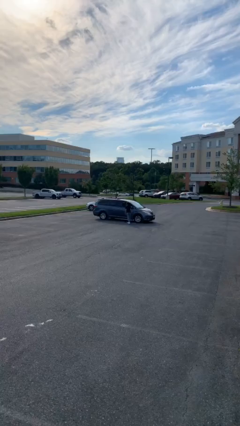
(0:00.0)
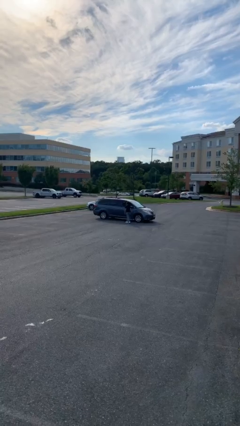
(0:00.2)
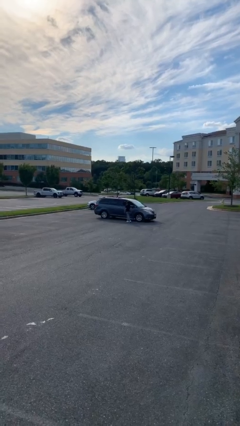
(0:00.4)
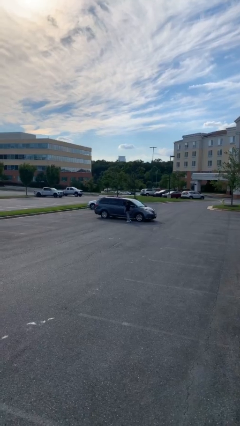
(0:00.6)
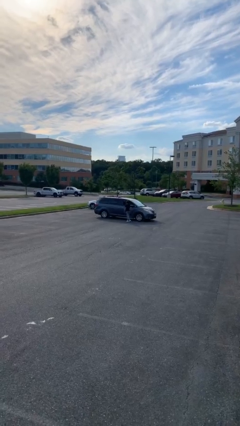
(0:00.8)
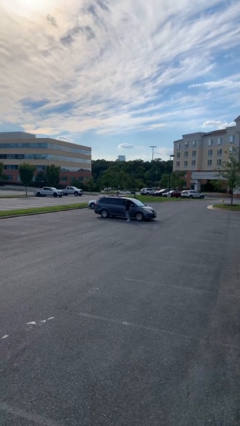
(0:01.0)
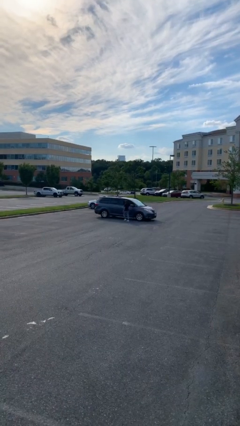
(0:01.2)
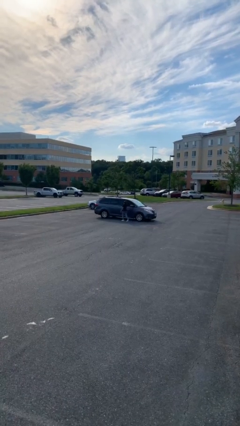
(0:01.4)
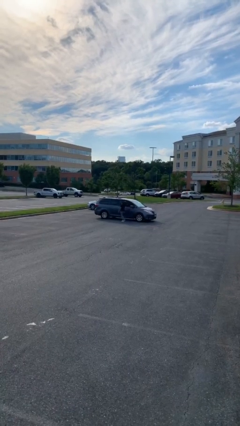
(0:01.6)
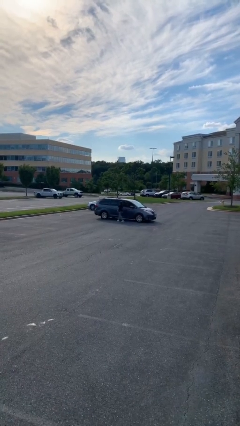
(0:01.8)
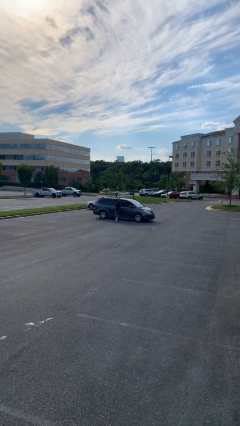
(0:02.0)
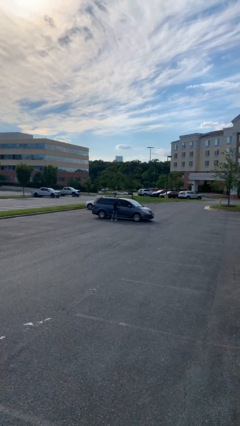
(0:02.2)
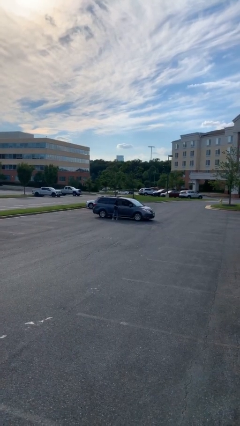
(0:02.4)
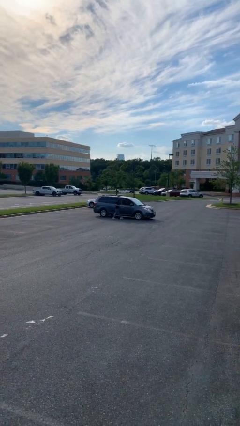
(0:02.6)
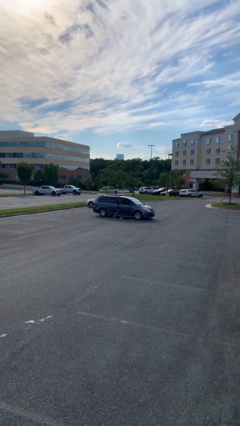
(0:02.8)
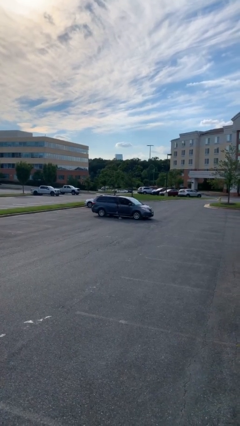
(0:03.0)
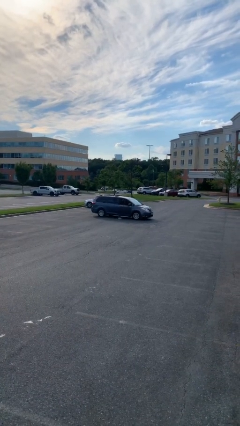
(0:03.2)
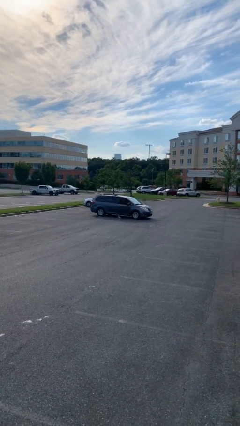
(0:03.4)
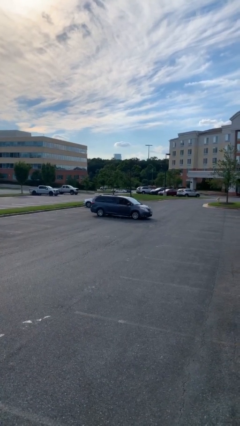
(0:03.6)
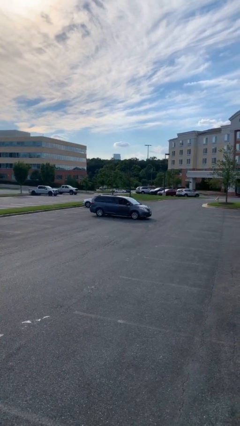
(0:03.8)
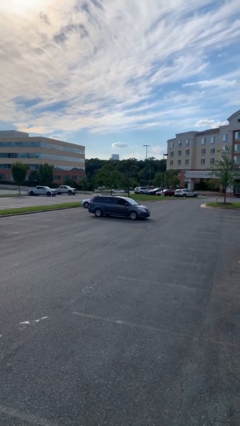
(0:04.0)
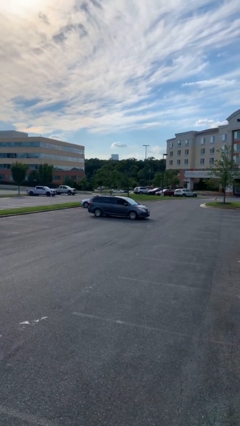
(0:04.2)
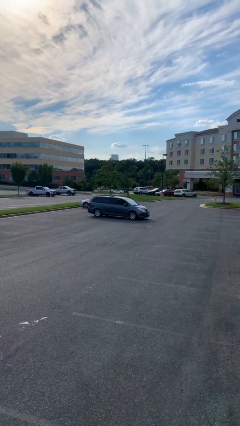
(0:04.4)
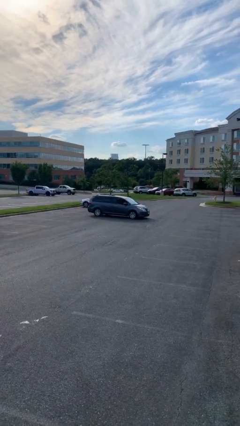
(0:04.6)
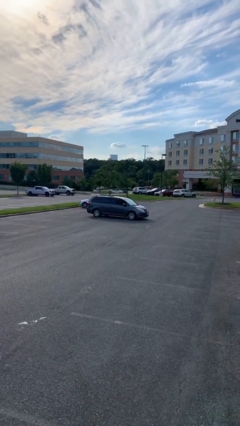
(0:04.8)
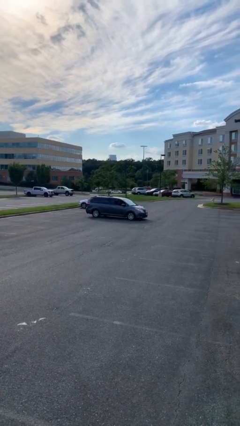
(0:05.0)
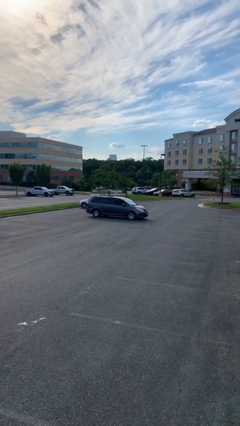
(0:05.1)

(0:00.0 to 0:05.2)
car picks up person

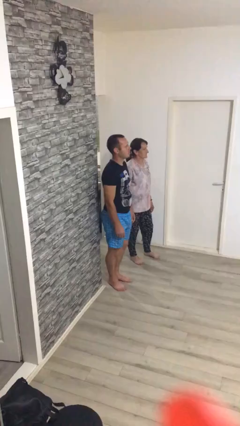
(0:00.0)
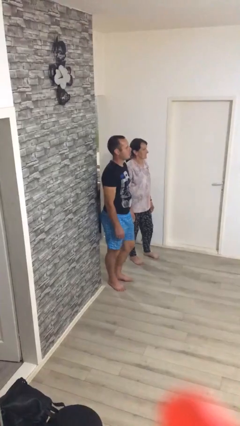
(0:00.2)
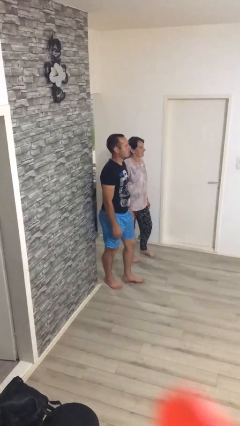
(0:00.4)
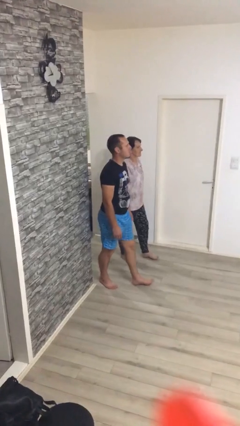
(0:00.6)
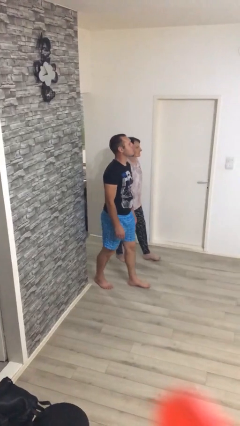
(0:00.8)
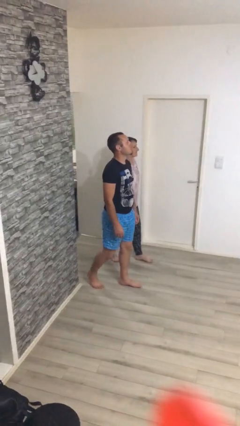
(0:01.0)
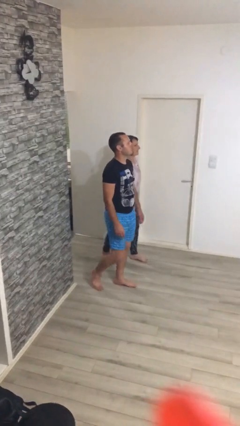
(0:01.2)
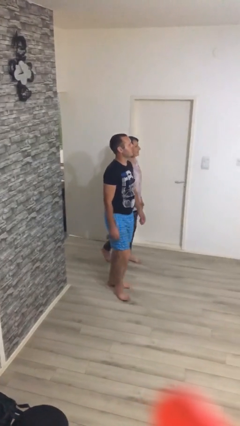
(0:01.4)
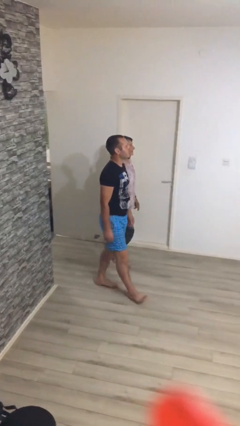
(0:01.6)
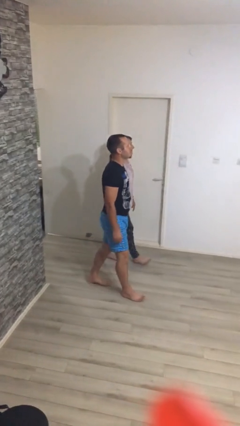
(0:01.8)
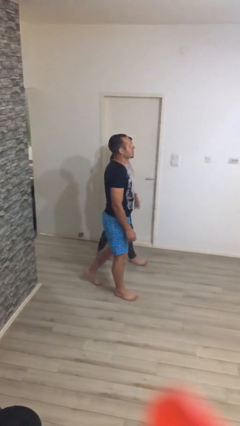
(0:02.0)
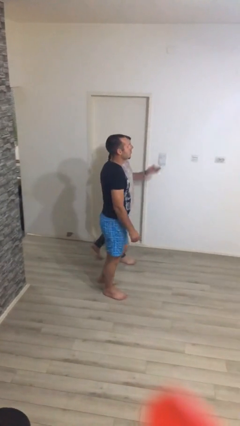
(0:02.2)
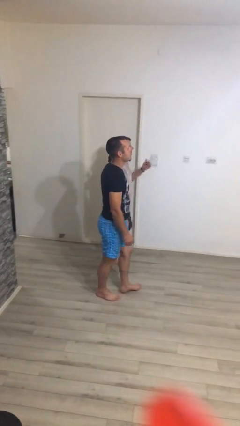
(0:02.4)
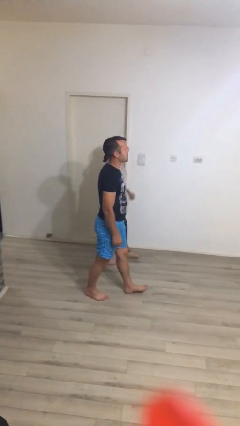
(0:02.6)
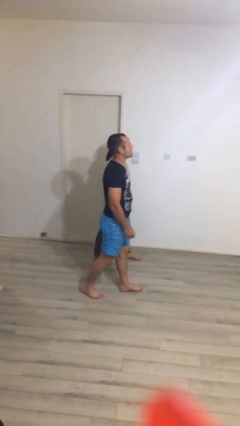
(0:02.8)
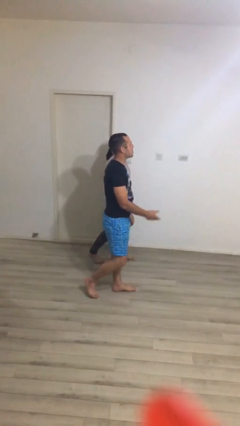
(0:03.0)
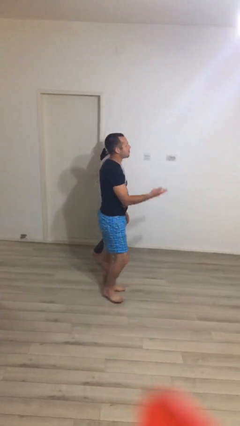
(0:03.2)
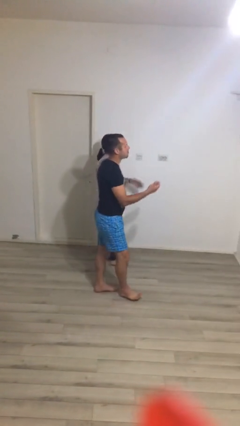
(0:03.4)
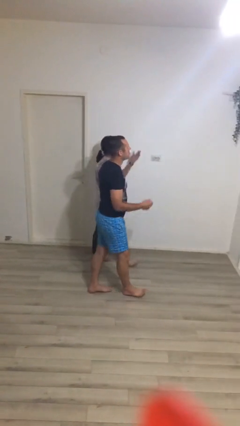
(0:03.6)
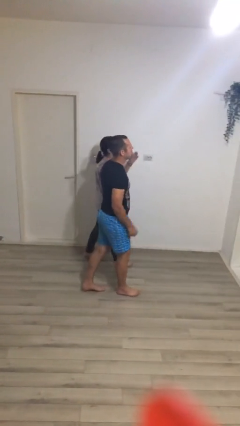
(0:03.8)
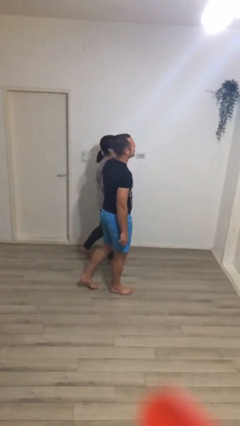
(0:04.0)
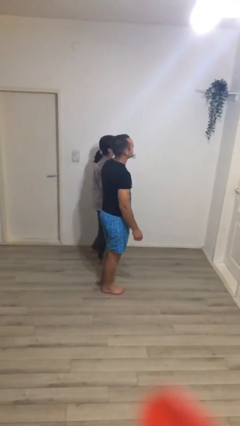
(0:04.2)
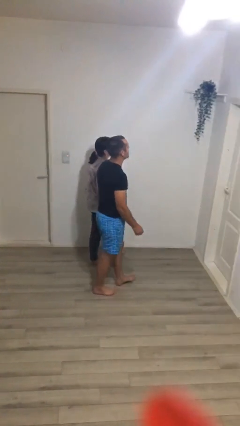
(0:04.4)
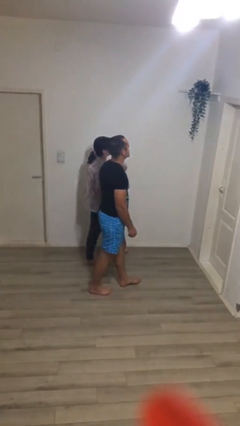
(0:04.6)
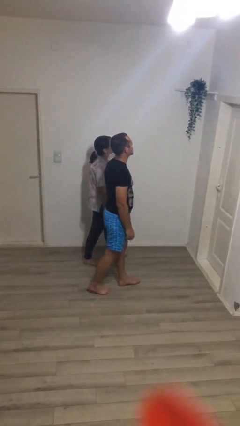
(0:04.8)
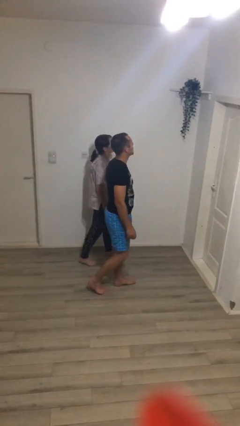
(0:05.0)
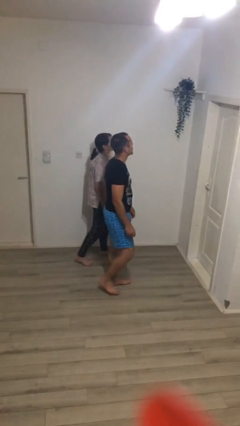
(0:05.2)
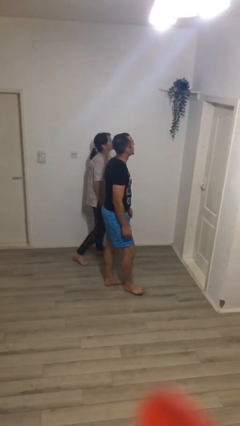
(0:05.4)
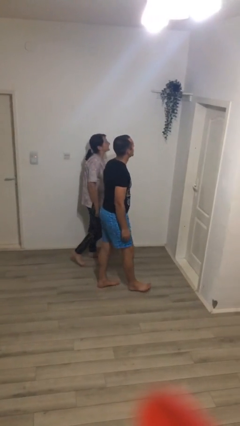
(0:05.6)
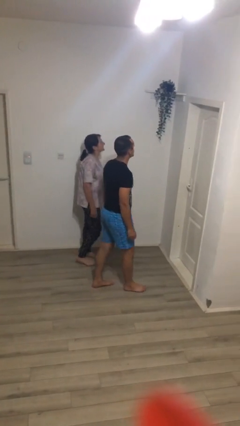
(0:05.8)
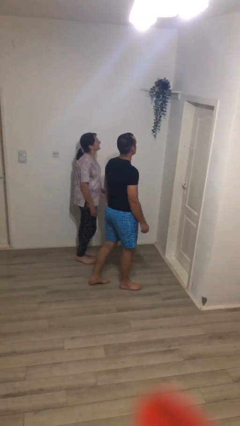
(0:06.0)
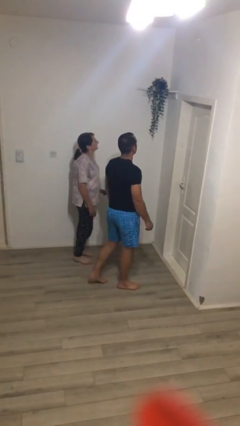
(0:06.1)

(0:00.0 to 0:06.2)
person talks to person

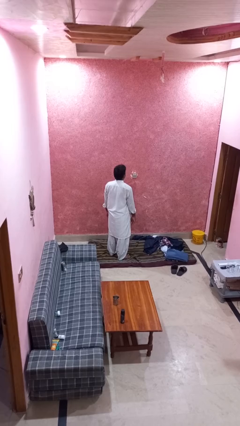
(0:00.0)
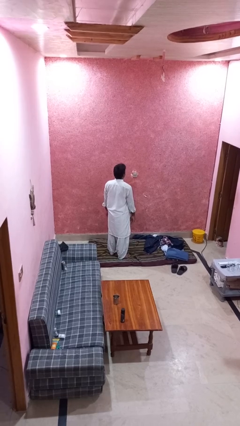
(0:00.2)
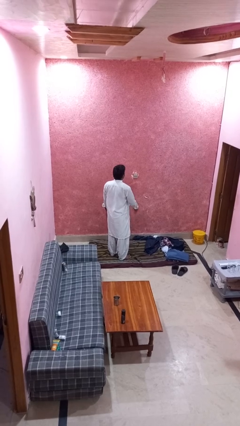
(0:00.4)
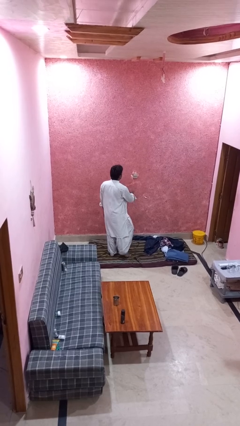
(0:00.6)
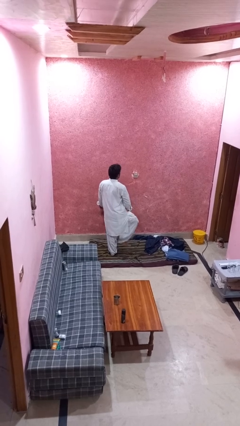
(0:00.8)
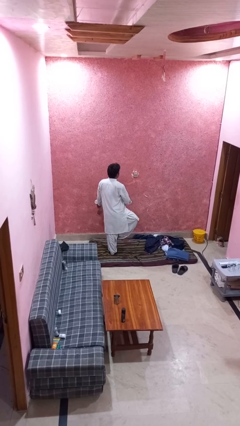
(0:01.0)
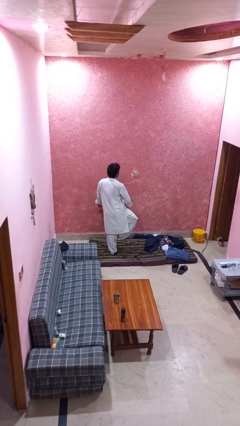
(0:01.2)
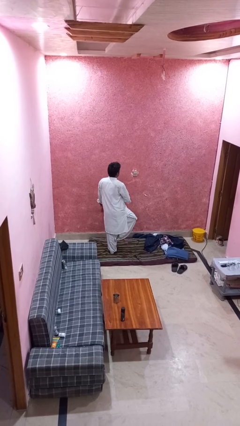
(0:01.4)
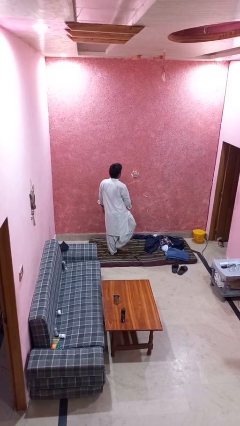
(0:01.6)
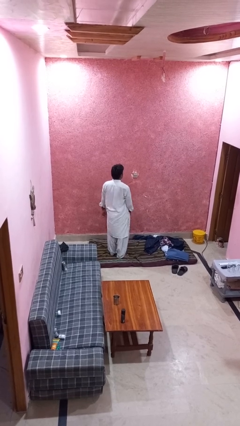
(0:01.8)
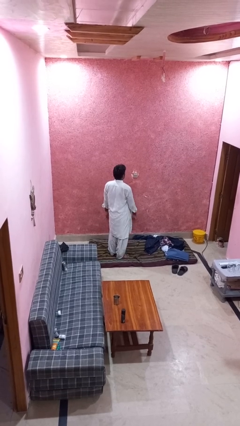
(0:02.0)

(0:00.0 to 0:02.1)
person slaps hands on thighs

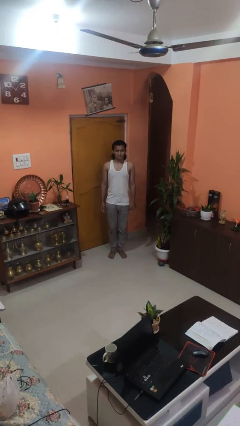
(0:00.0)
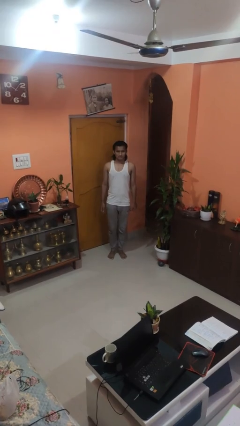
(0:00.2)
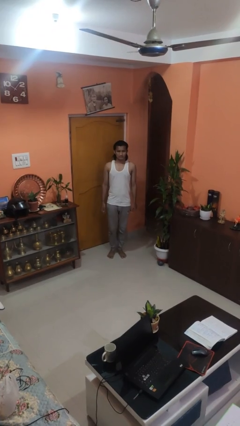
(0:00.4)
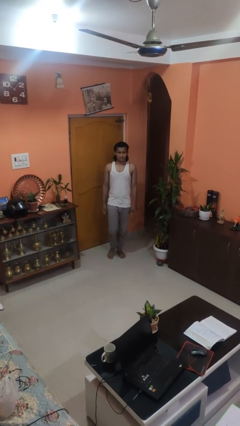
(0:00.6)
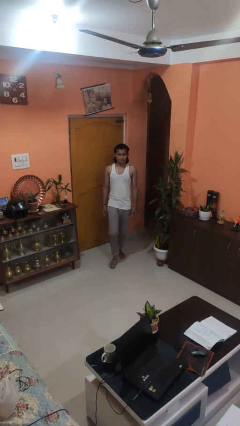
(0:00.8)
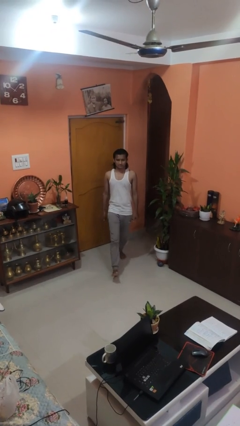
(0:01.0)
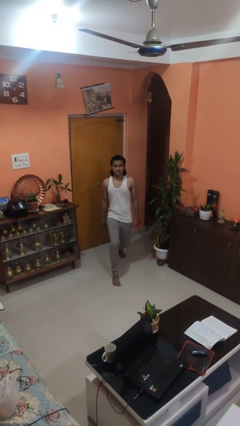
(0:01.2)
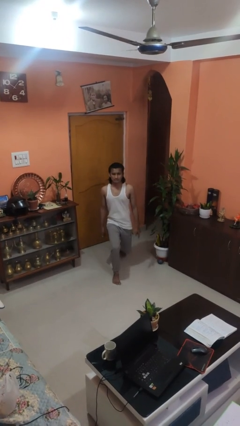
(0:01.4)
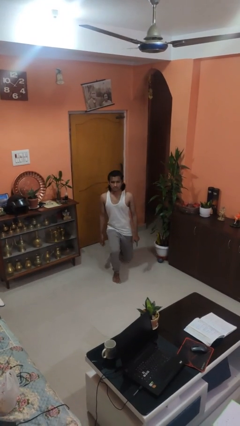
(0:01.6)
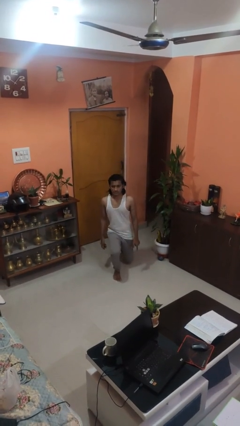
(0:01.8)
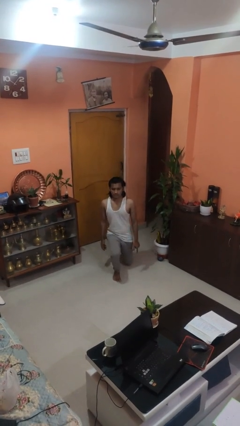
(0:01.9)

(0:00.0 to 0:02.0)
person kneels

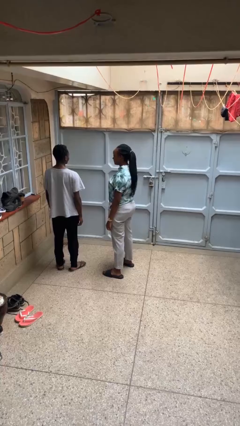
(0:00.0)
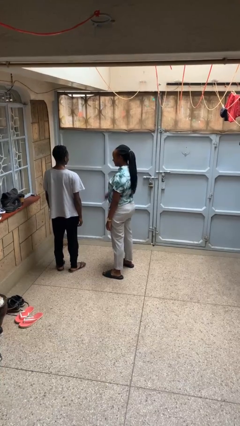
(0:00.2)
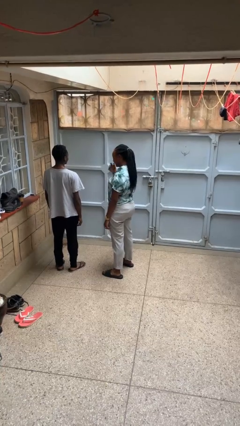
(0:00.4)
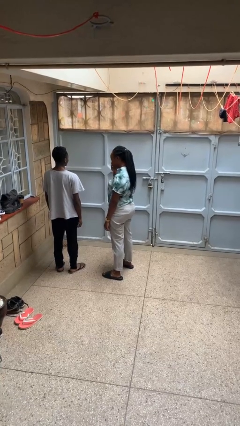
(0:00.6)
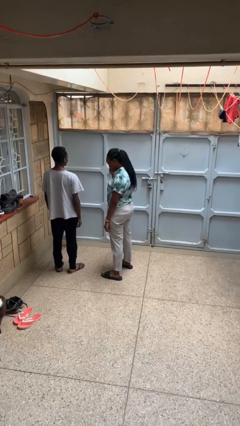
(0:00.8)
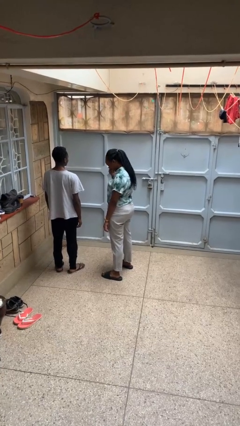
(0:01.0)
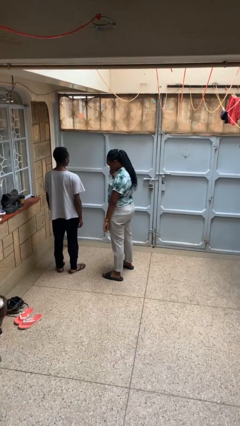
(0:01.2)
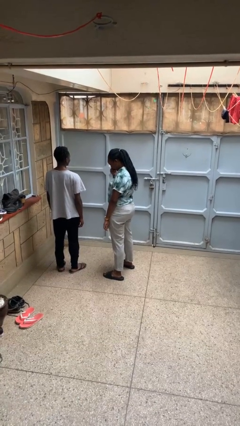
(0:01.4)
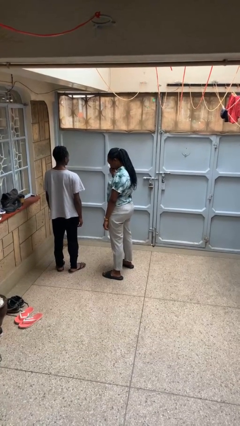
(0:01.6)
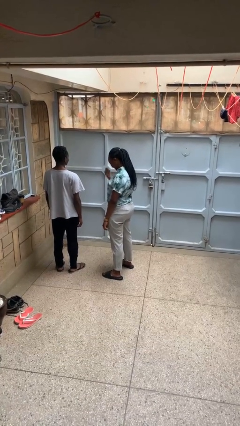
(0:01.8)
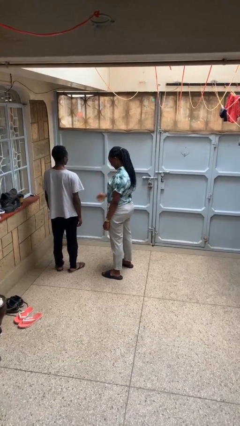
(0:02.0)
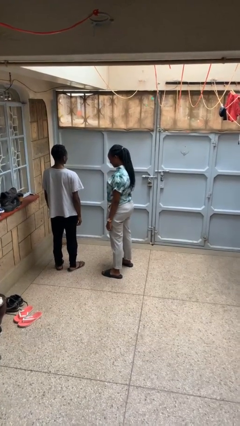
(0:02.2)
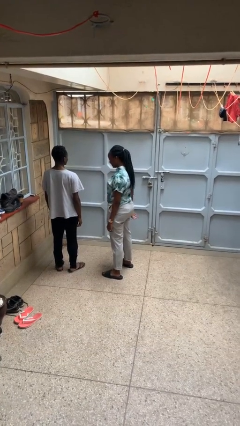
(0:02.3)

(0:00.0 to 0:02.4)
person laughs with person
